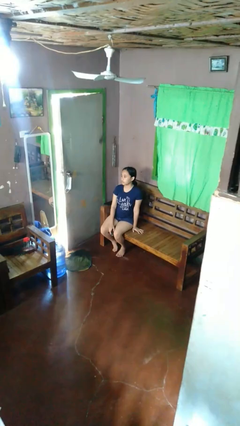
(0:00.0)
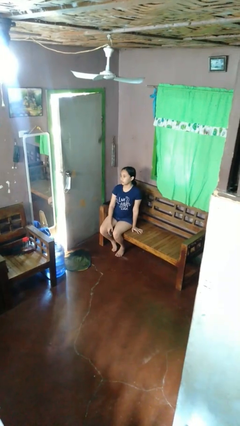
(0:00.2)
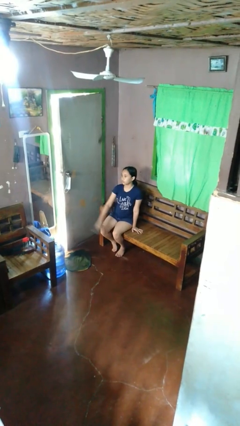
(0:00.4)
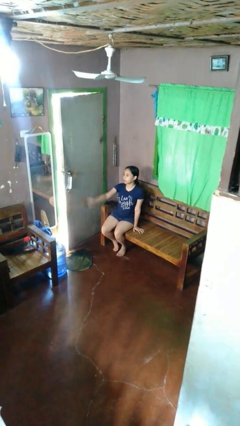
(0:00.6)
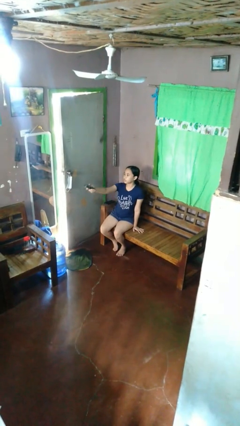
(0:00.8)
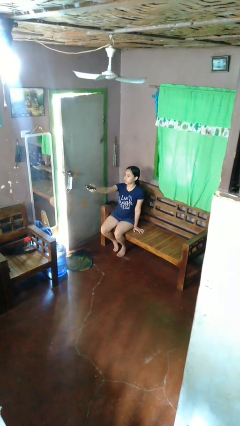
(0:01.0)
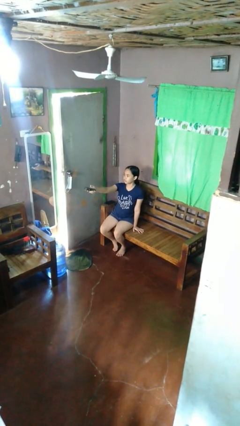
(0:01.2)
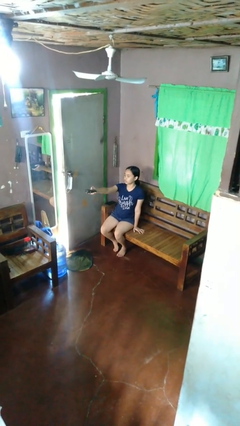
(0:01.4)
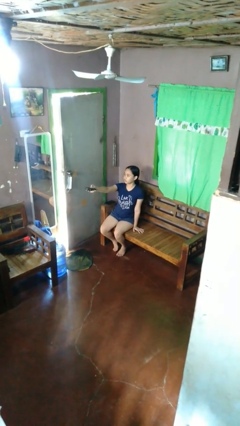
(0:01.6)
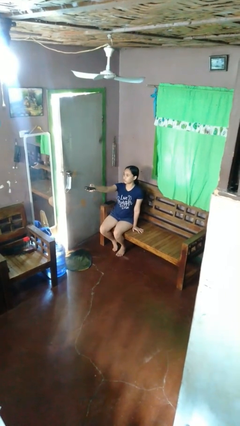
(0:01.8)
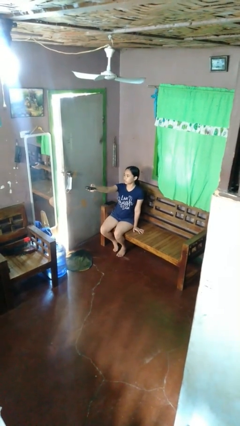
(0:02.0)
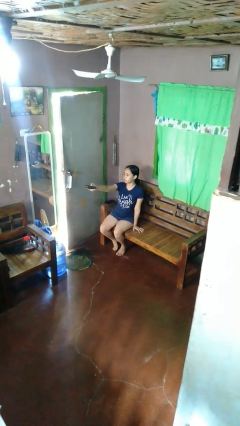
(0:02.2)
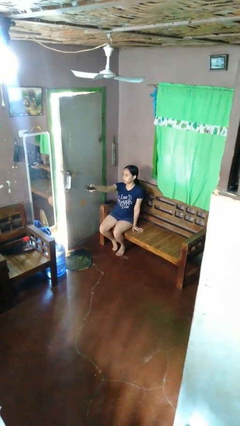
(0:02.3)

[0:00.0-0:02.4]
person uses television remote

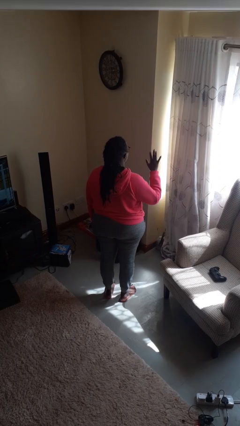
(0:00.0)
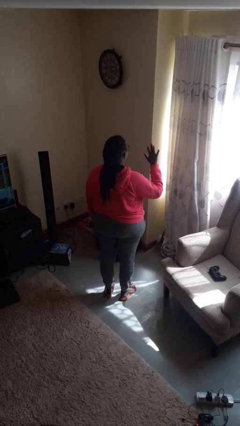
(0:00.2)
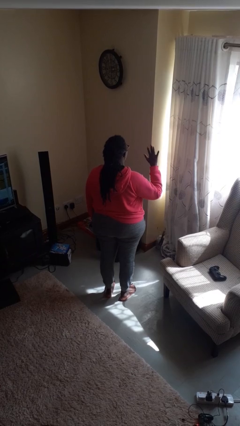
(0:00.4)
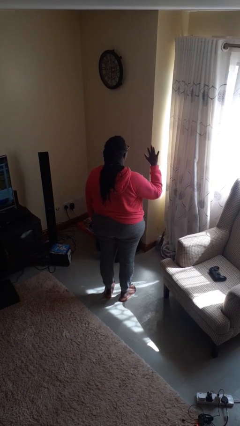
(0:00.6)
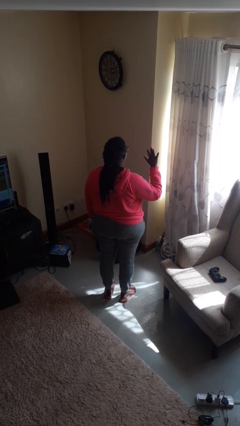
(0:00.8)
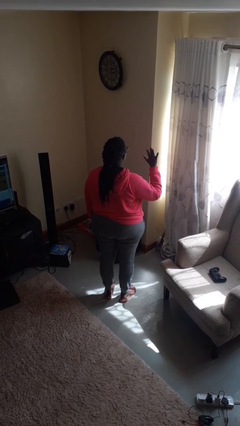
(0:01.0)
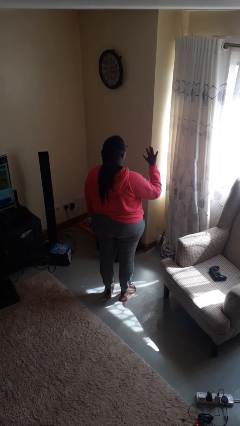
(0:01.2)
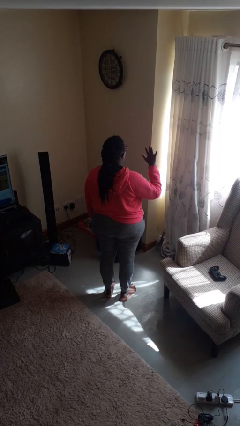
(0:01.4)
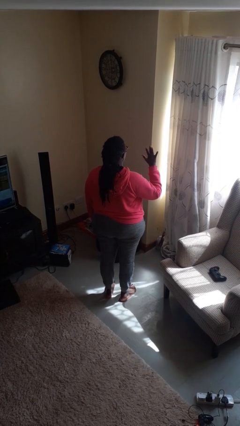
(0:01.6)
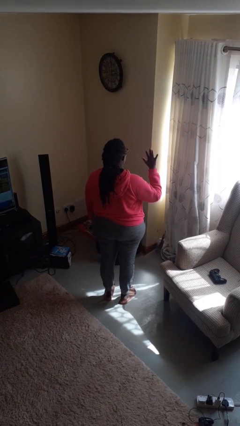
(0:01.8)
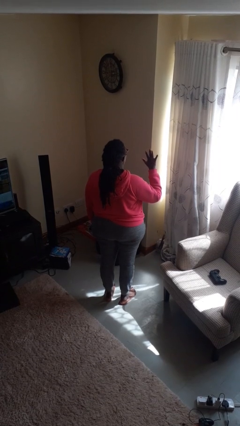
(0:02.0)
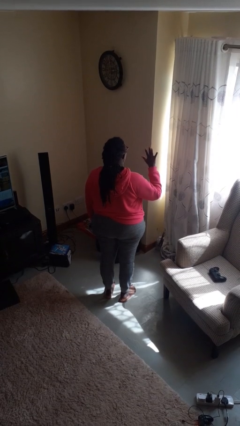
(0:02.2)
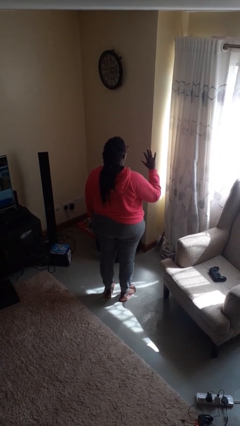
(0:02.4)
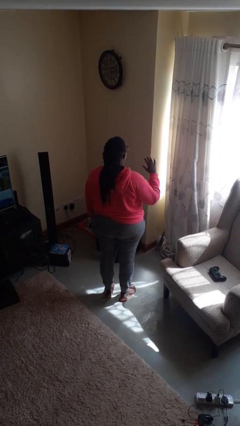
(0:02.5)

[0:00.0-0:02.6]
person gestures number five

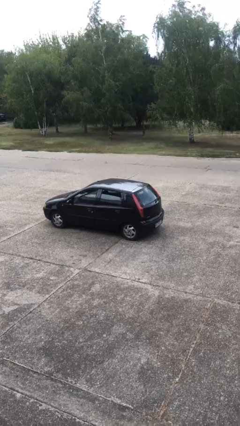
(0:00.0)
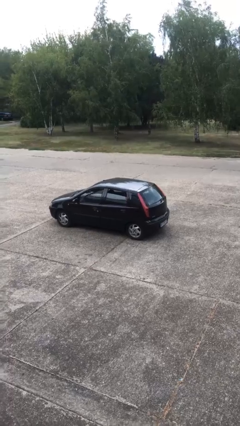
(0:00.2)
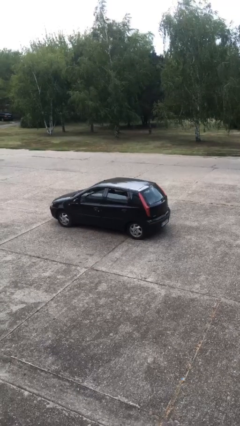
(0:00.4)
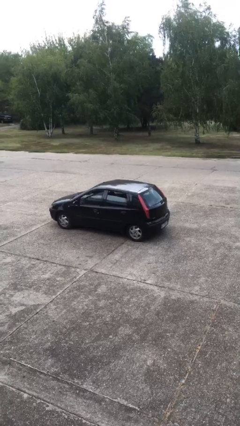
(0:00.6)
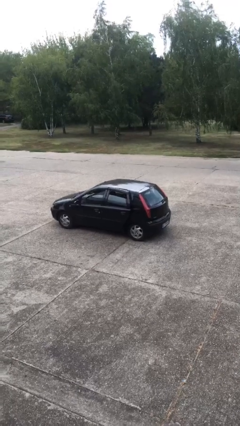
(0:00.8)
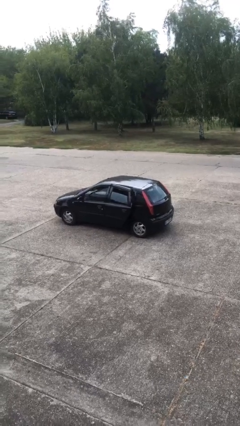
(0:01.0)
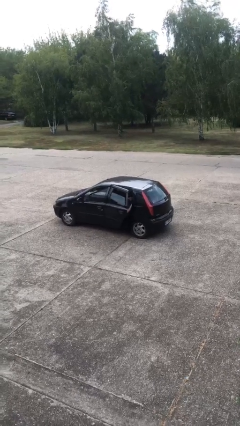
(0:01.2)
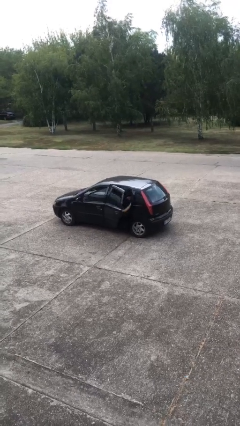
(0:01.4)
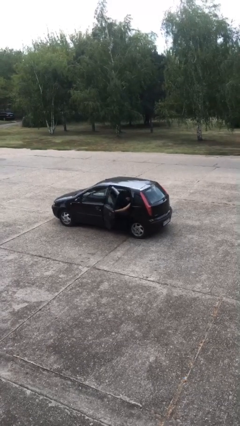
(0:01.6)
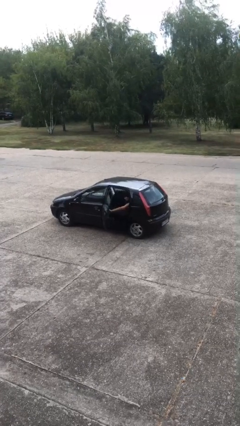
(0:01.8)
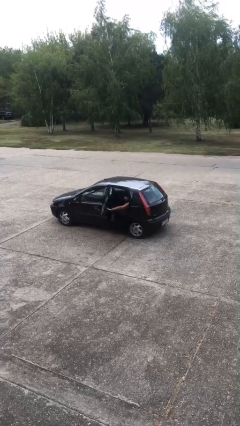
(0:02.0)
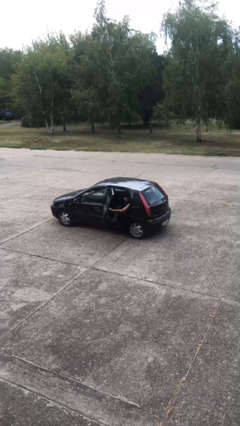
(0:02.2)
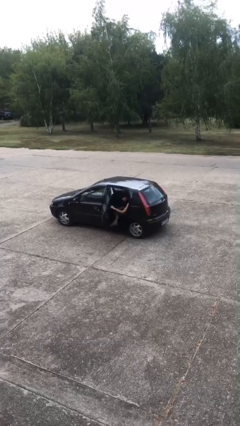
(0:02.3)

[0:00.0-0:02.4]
person opens car door

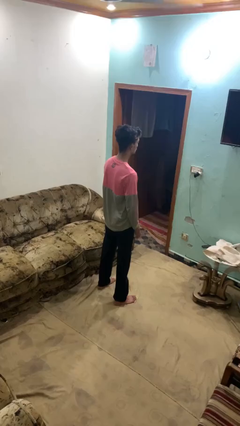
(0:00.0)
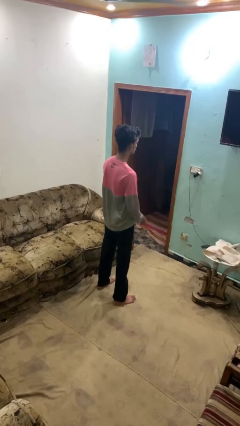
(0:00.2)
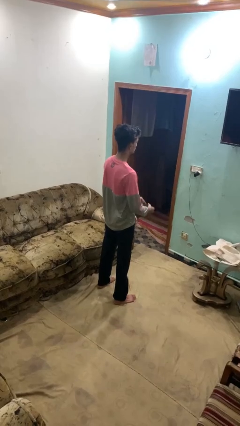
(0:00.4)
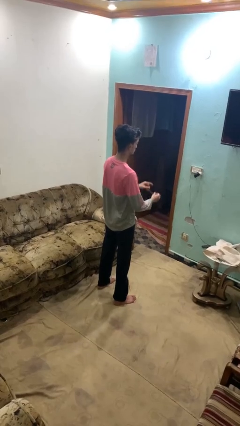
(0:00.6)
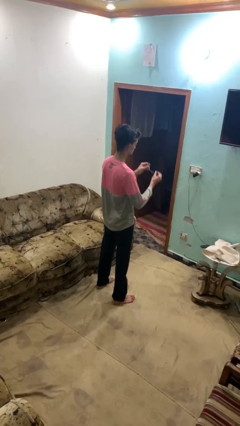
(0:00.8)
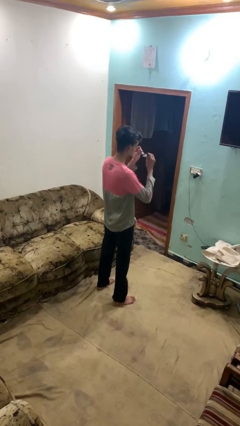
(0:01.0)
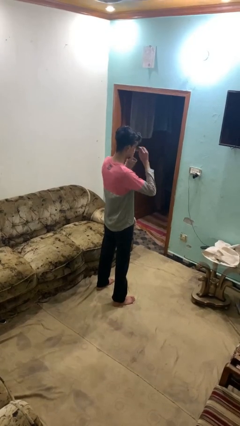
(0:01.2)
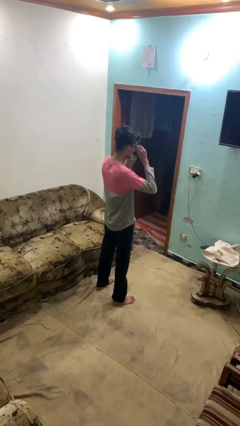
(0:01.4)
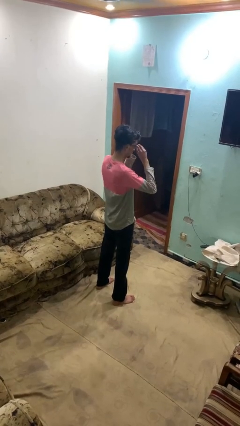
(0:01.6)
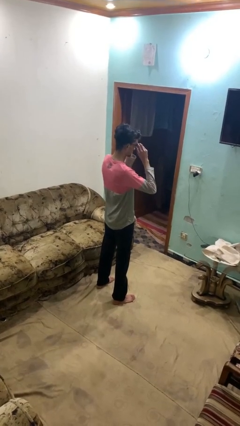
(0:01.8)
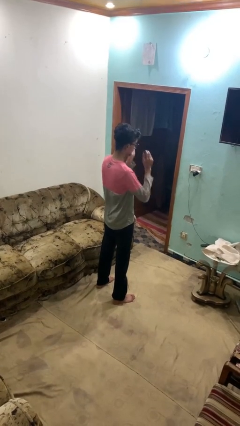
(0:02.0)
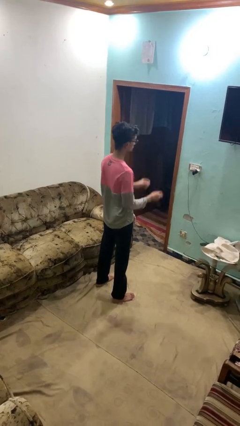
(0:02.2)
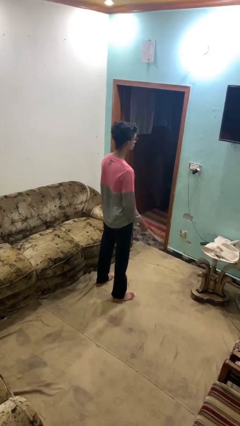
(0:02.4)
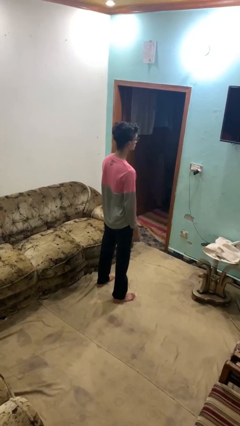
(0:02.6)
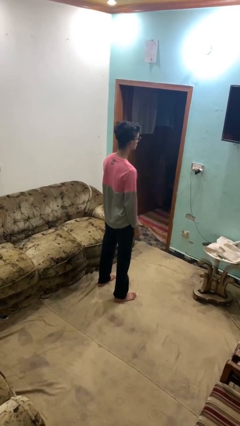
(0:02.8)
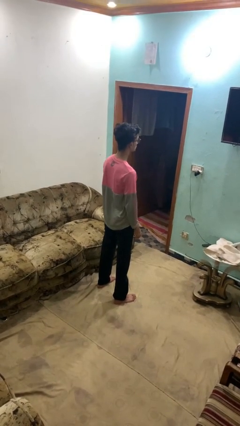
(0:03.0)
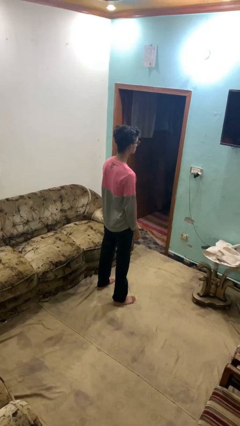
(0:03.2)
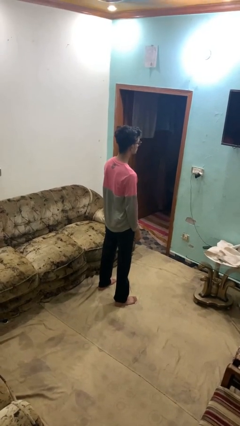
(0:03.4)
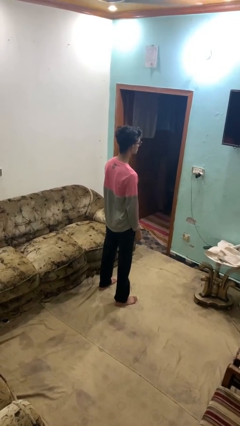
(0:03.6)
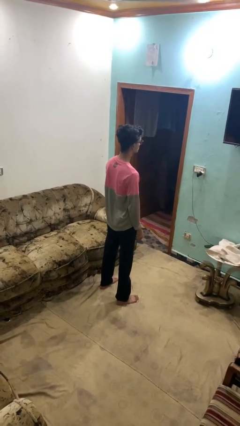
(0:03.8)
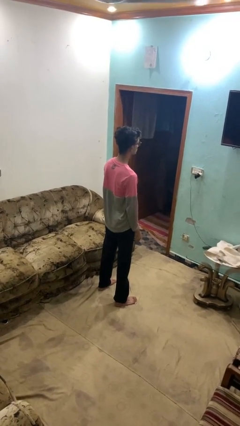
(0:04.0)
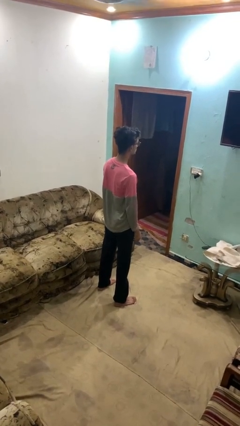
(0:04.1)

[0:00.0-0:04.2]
person puts on glasses

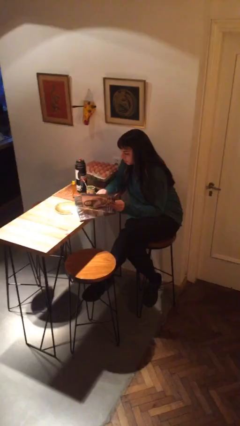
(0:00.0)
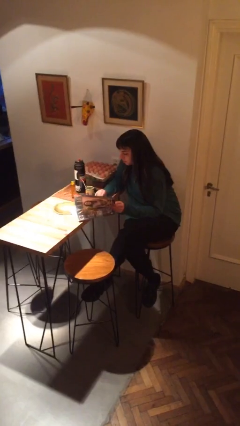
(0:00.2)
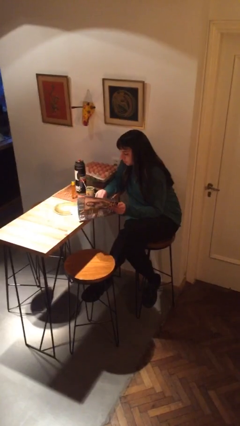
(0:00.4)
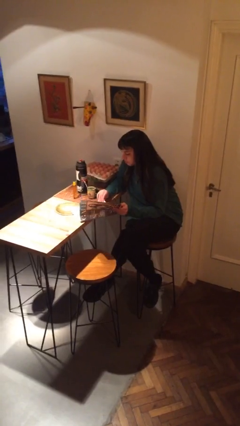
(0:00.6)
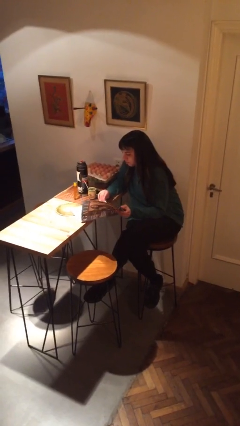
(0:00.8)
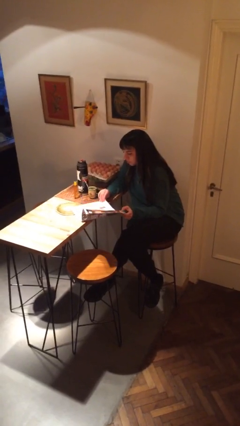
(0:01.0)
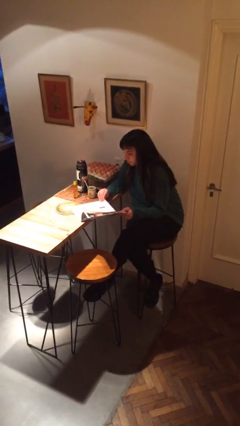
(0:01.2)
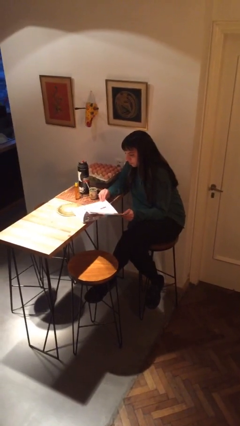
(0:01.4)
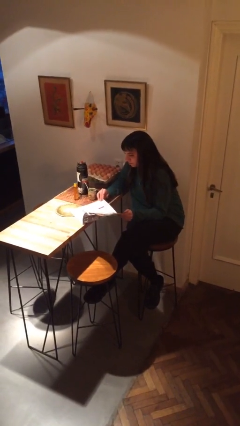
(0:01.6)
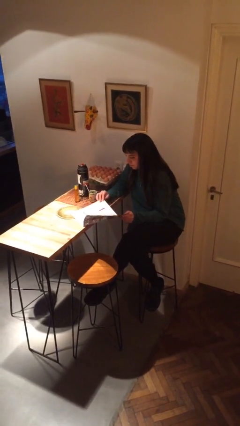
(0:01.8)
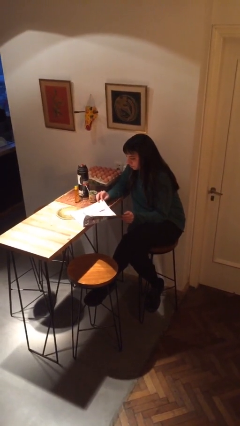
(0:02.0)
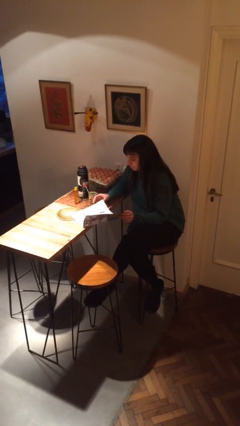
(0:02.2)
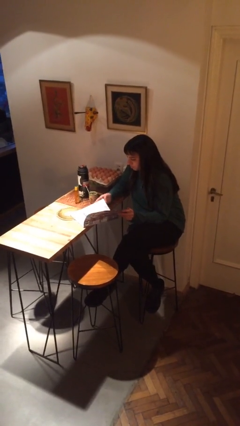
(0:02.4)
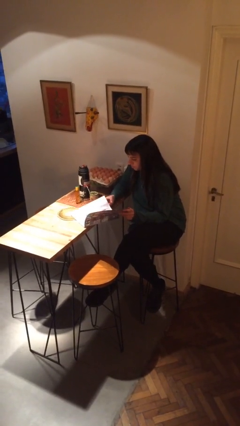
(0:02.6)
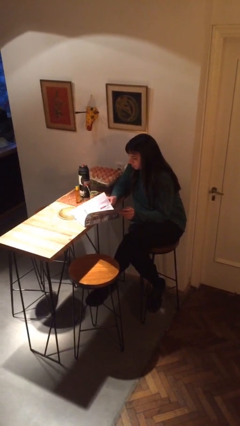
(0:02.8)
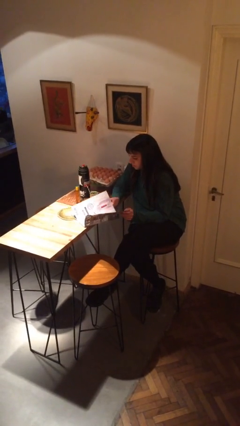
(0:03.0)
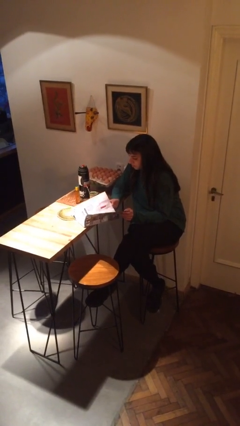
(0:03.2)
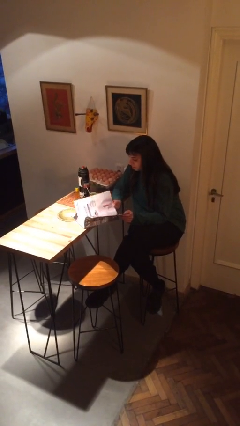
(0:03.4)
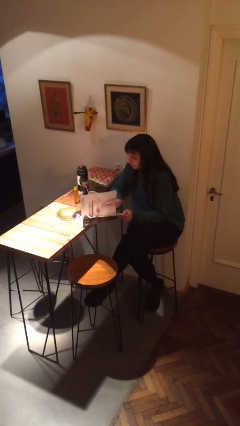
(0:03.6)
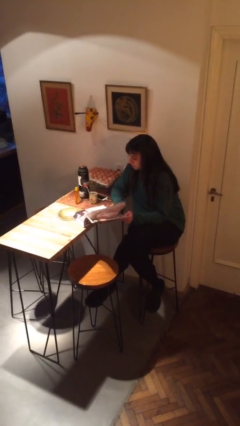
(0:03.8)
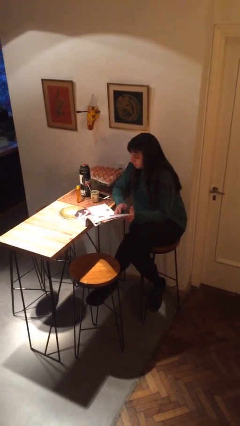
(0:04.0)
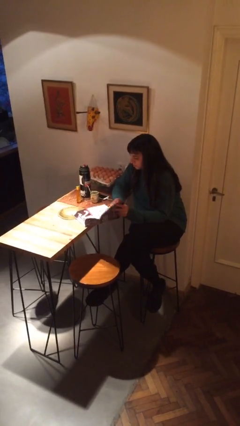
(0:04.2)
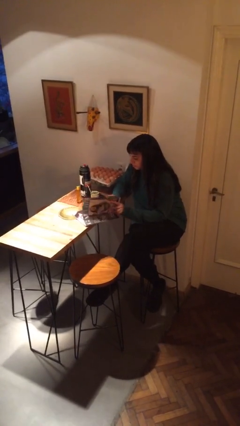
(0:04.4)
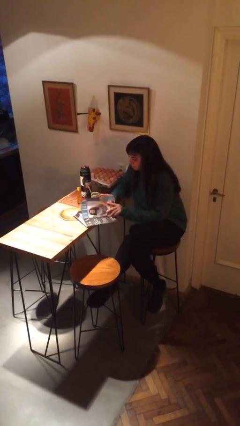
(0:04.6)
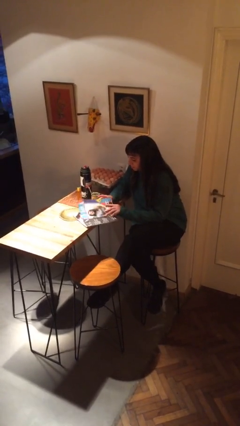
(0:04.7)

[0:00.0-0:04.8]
person reads magazine

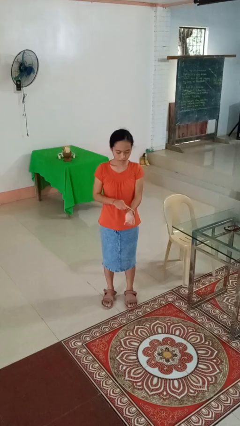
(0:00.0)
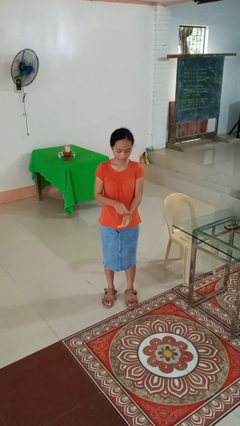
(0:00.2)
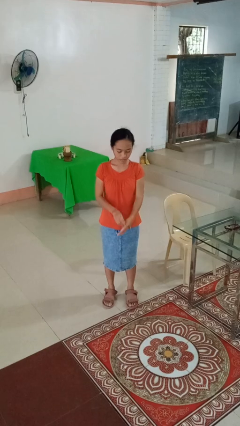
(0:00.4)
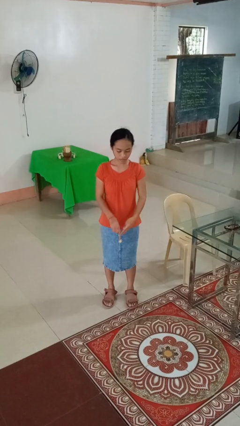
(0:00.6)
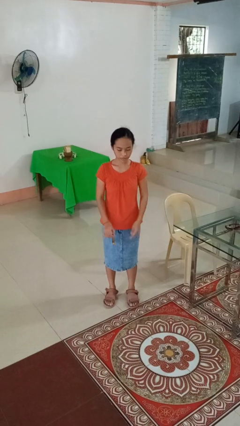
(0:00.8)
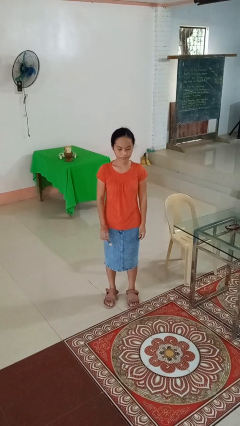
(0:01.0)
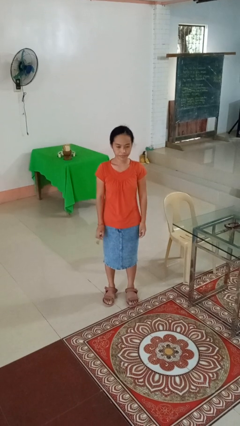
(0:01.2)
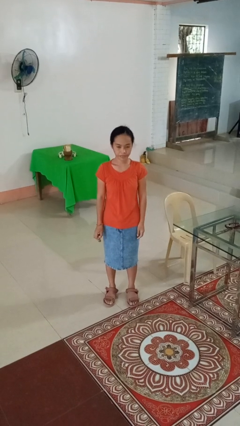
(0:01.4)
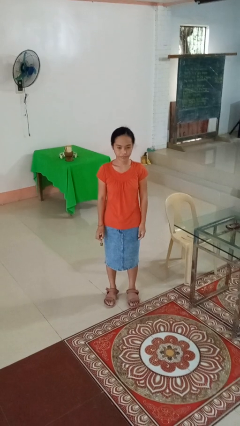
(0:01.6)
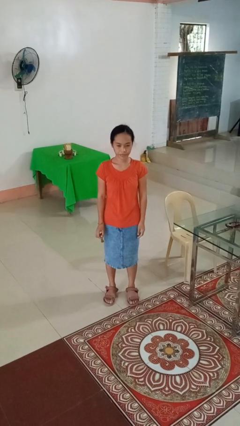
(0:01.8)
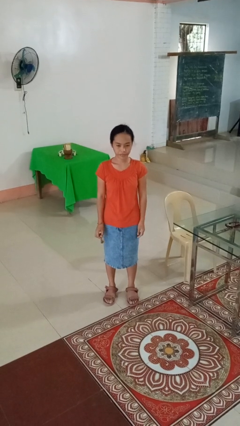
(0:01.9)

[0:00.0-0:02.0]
person takes off wristwatch
